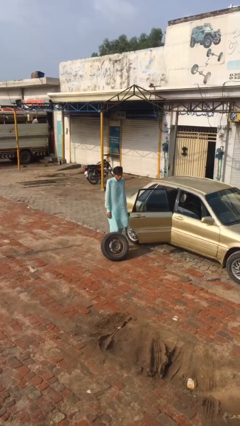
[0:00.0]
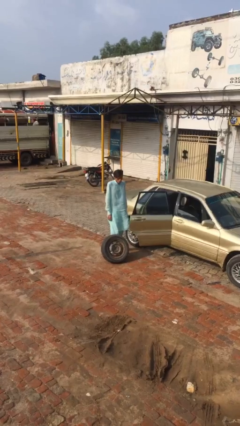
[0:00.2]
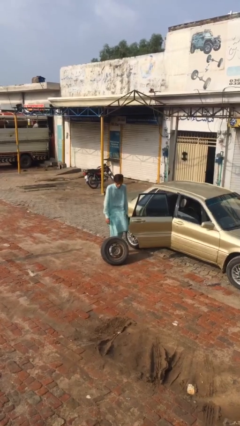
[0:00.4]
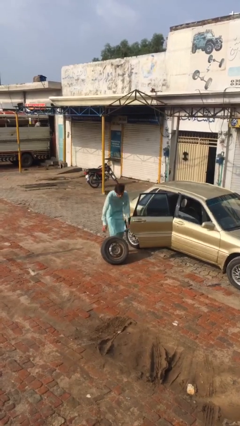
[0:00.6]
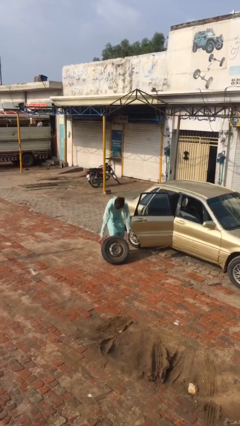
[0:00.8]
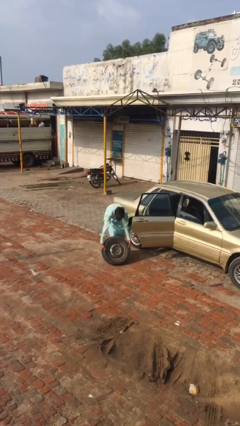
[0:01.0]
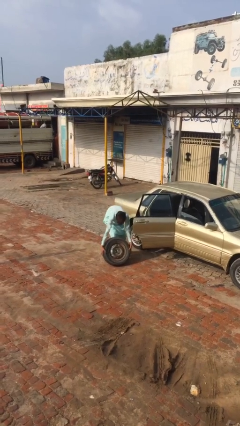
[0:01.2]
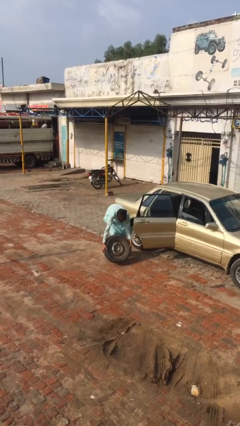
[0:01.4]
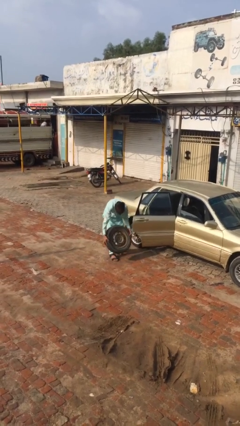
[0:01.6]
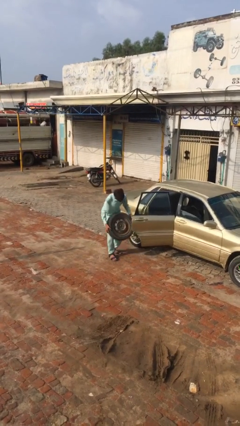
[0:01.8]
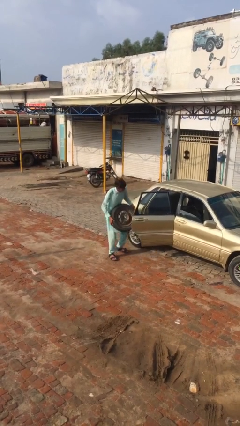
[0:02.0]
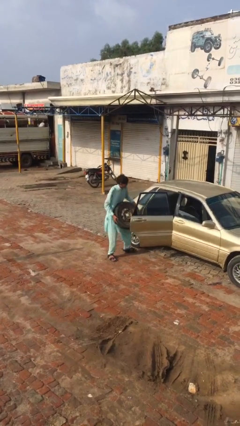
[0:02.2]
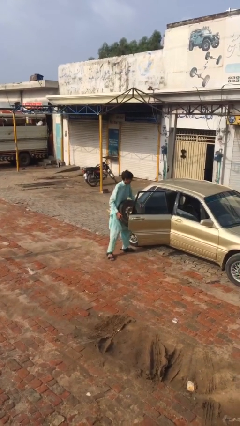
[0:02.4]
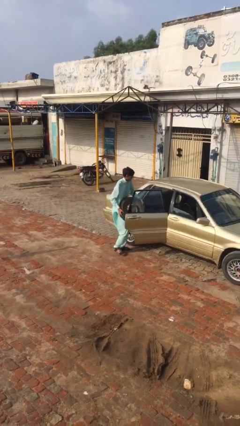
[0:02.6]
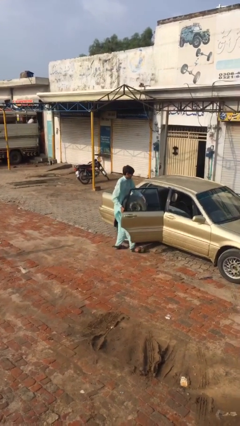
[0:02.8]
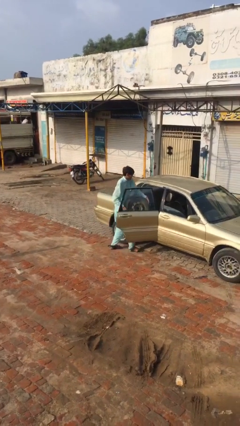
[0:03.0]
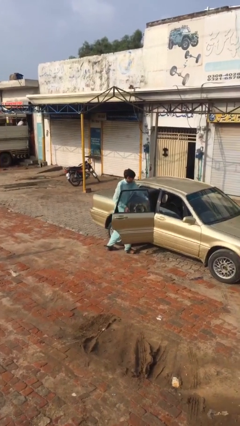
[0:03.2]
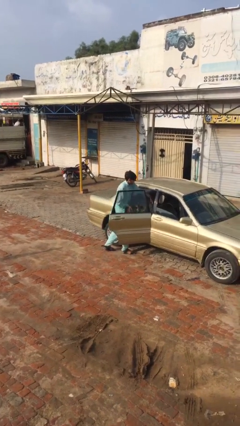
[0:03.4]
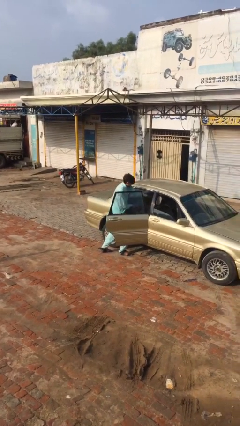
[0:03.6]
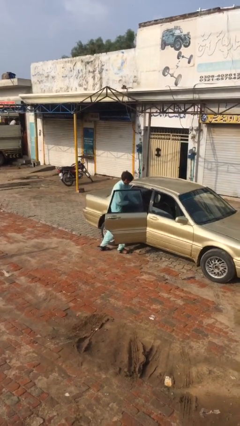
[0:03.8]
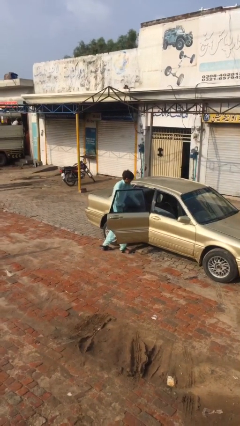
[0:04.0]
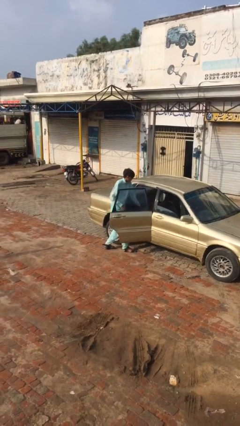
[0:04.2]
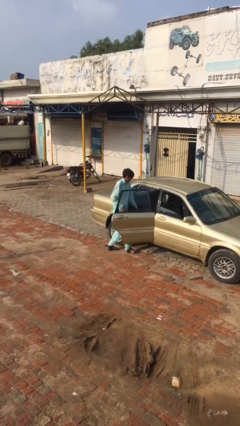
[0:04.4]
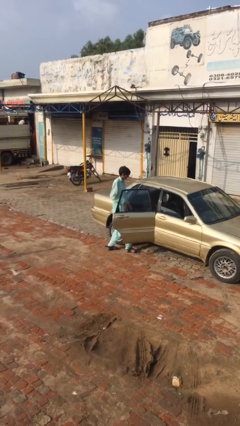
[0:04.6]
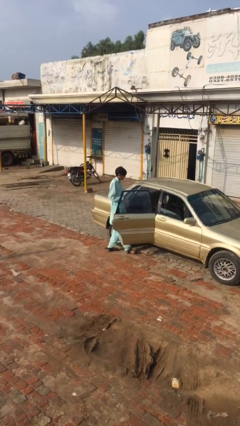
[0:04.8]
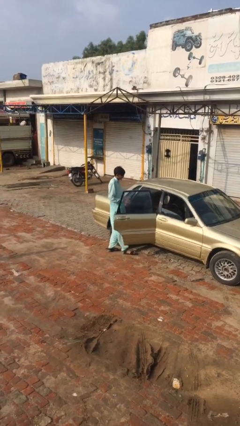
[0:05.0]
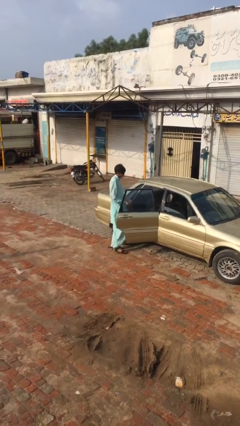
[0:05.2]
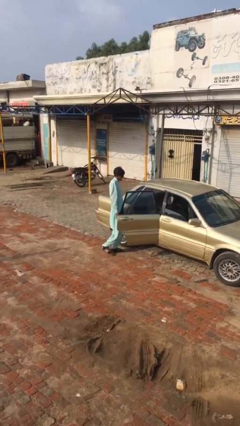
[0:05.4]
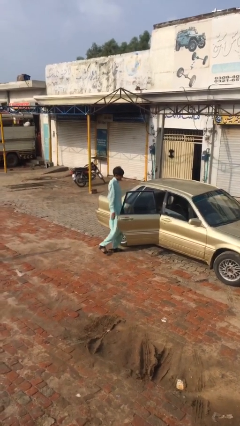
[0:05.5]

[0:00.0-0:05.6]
person loads car

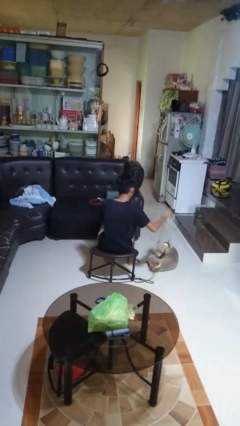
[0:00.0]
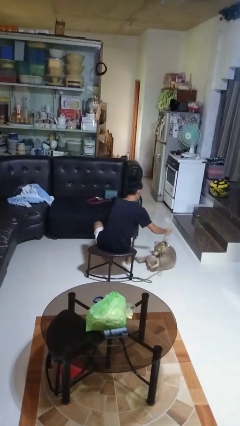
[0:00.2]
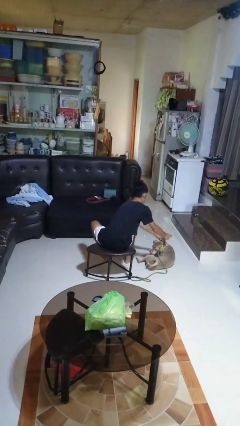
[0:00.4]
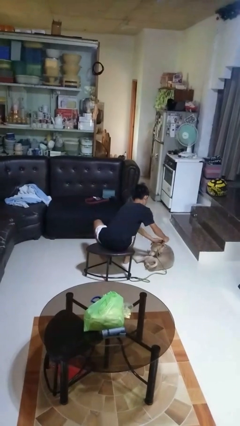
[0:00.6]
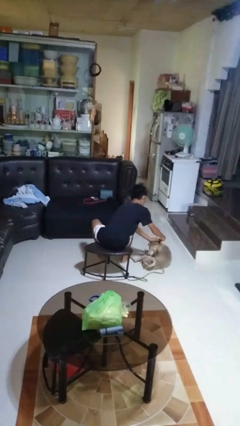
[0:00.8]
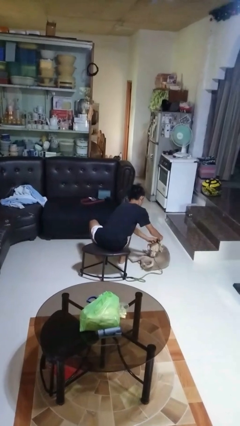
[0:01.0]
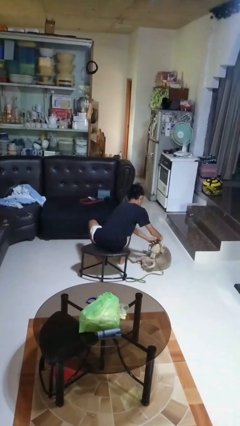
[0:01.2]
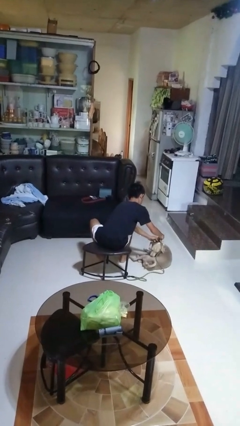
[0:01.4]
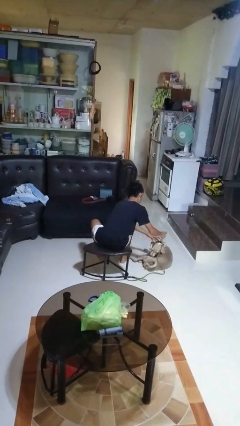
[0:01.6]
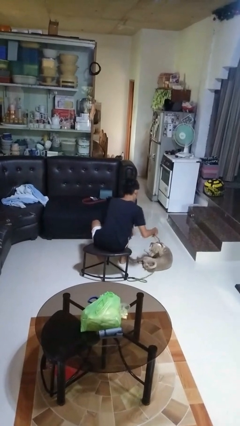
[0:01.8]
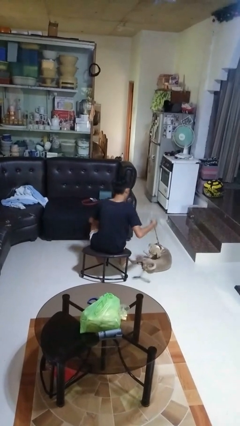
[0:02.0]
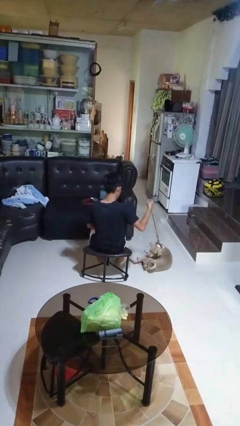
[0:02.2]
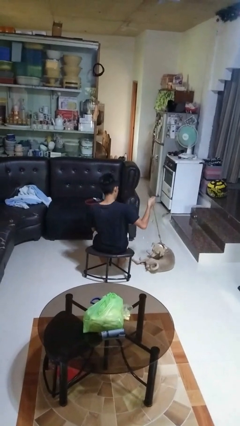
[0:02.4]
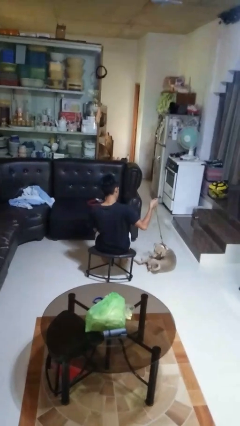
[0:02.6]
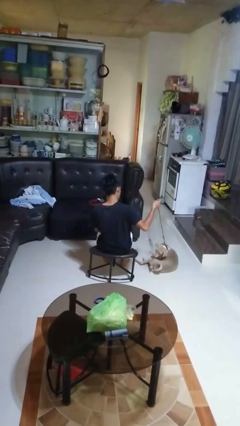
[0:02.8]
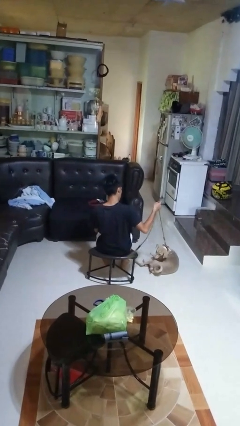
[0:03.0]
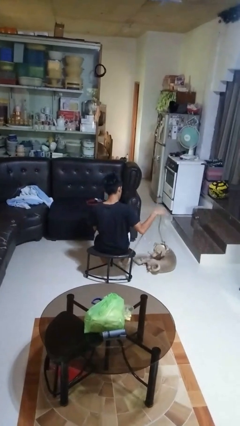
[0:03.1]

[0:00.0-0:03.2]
person attaches leash to dog

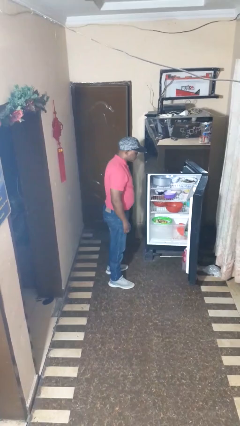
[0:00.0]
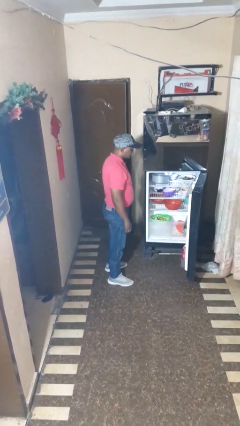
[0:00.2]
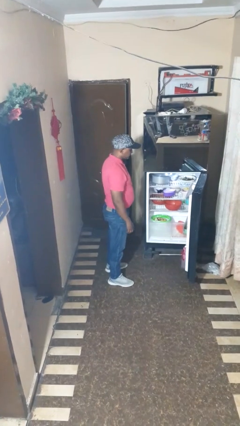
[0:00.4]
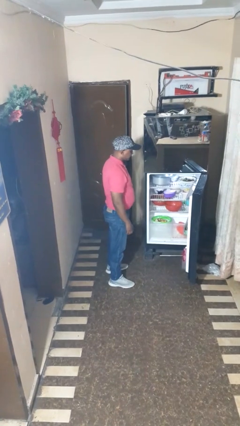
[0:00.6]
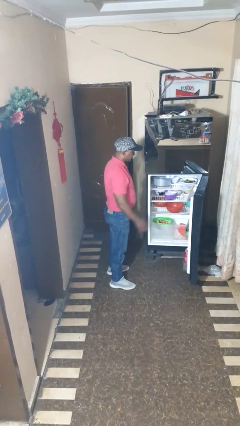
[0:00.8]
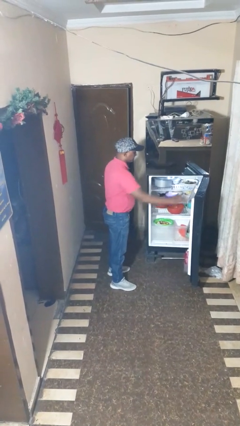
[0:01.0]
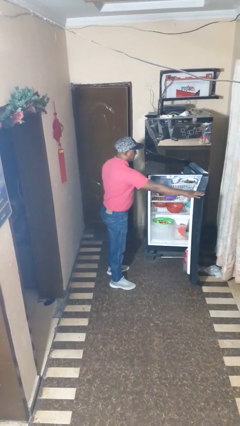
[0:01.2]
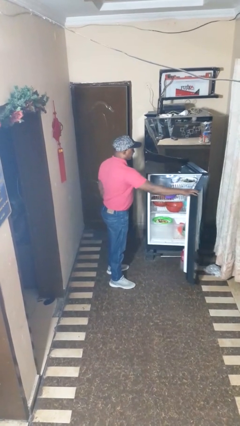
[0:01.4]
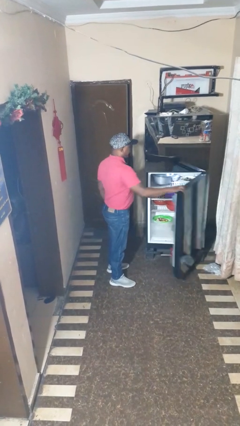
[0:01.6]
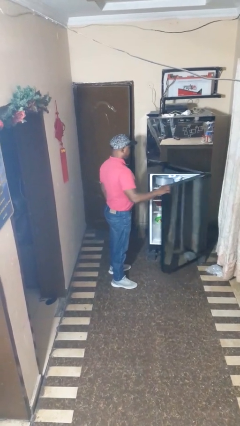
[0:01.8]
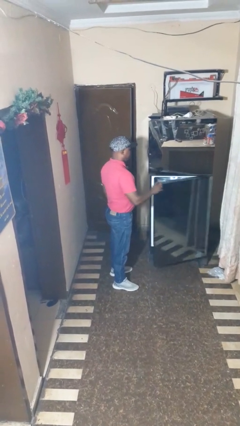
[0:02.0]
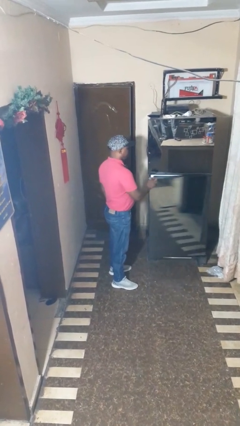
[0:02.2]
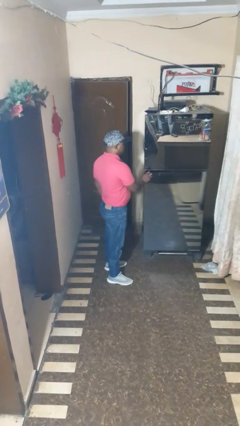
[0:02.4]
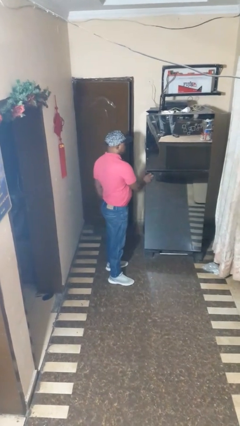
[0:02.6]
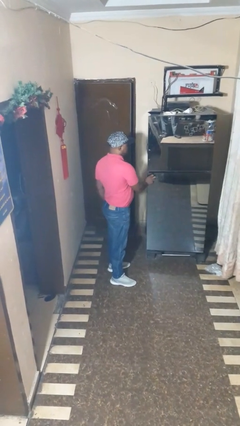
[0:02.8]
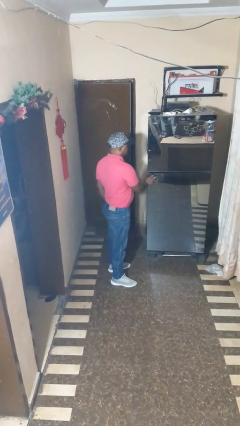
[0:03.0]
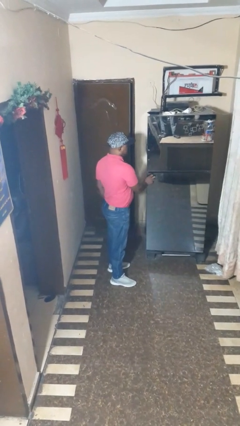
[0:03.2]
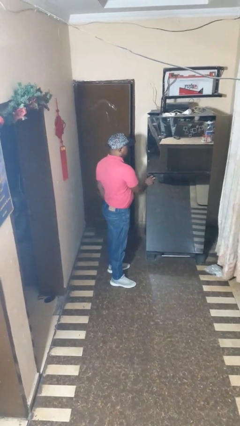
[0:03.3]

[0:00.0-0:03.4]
person closes refrigerator

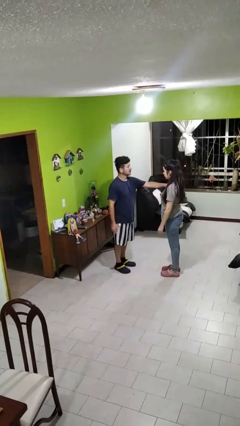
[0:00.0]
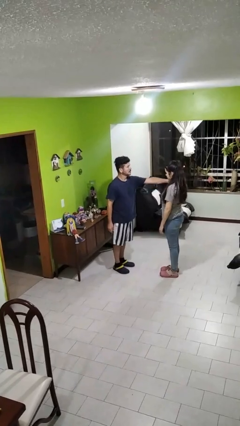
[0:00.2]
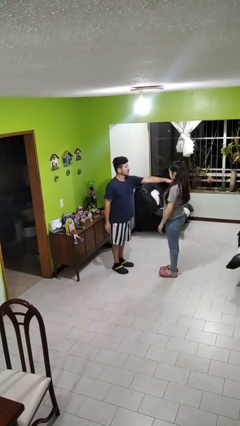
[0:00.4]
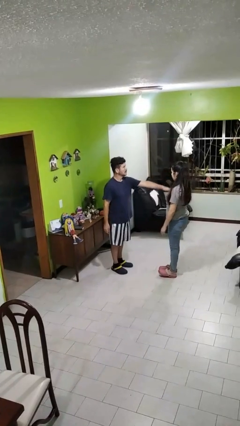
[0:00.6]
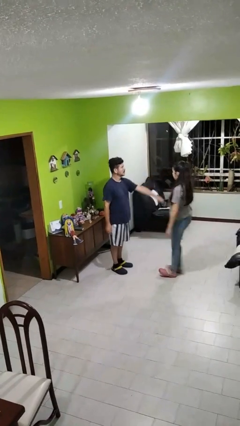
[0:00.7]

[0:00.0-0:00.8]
person shoves person

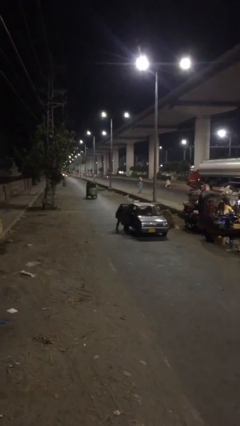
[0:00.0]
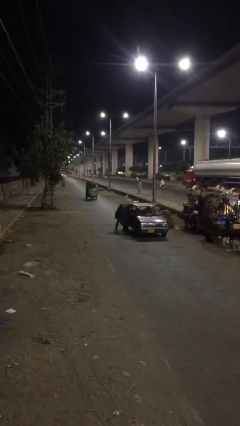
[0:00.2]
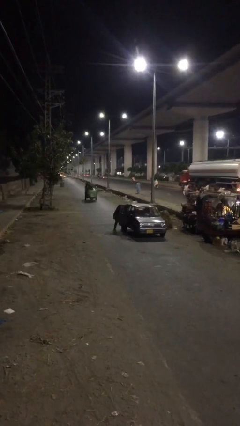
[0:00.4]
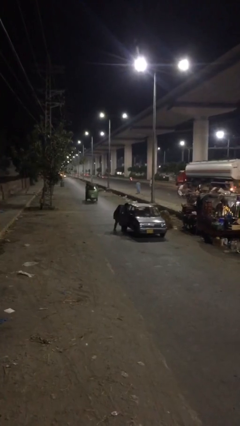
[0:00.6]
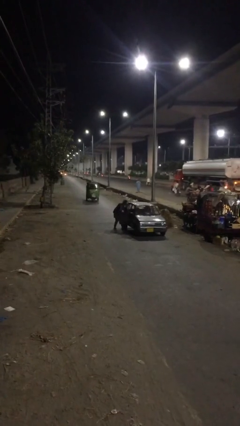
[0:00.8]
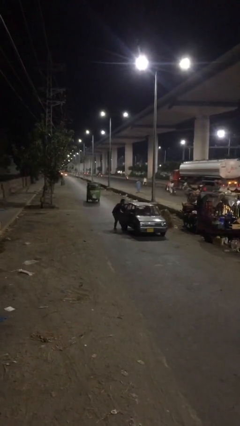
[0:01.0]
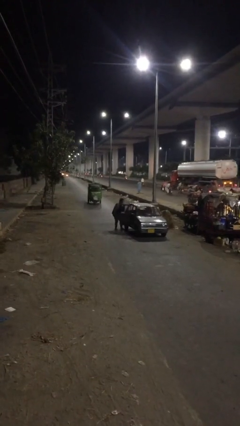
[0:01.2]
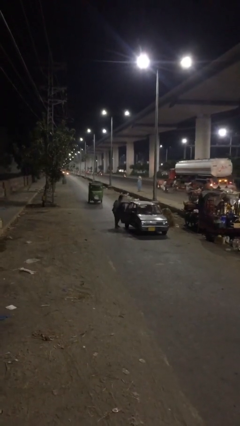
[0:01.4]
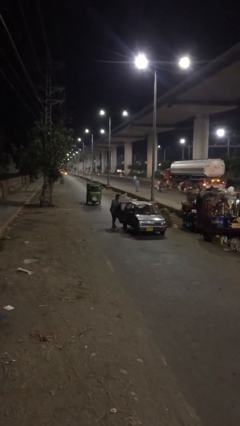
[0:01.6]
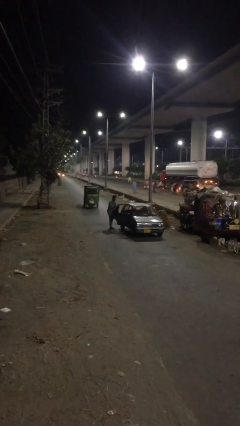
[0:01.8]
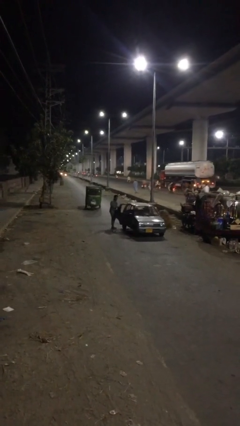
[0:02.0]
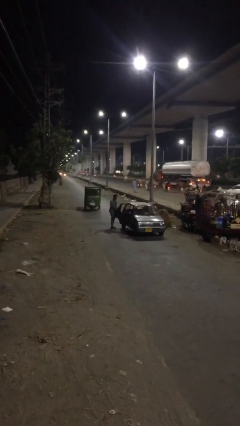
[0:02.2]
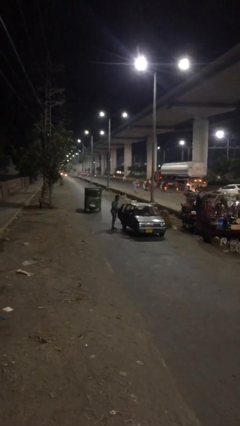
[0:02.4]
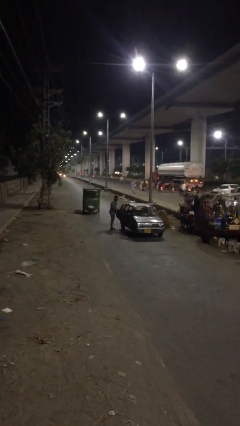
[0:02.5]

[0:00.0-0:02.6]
person unloads car

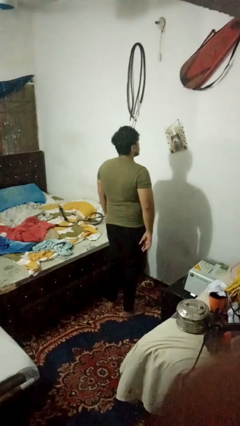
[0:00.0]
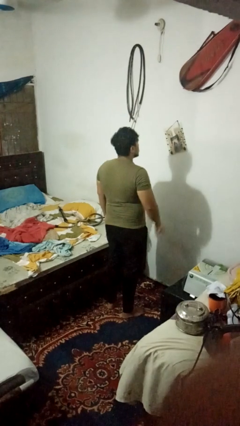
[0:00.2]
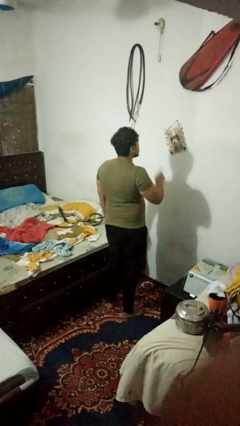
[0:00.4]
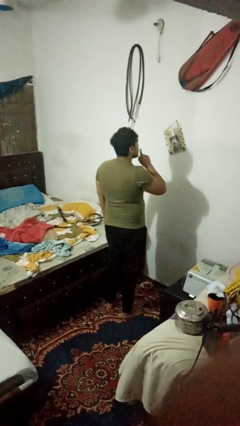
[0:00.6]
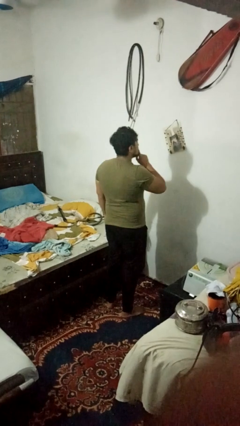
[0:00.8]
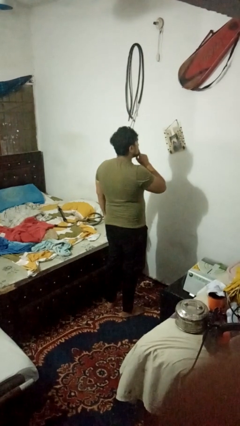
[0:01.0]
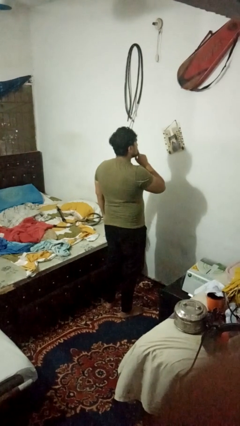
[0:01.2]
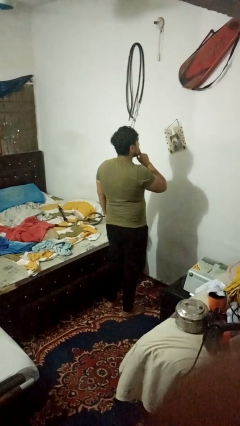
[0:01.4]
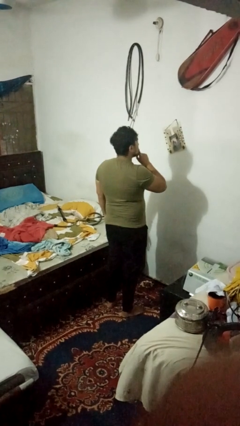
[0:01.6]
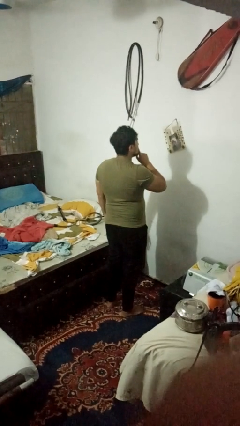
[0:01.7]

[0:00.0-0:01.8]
person gestures be quiet
